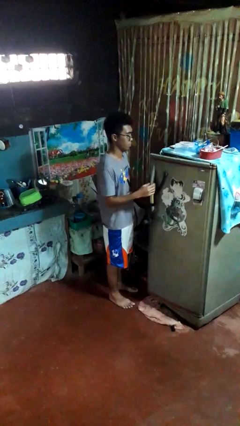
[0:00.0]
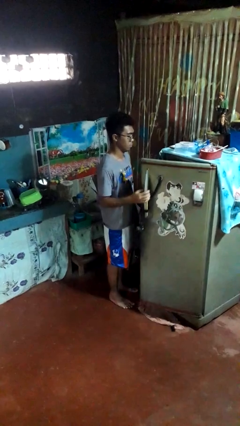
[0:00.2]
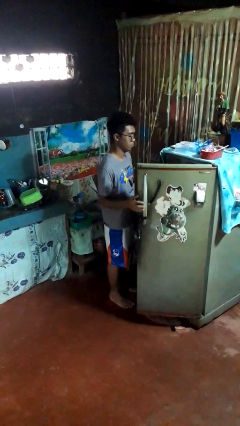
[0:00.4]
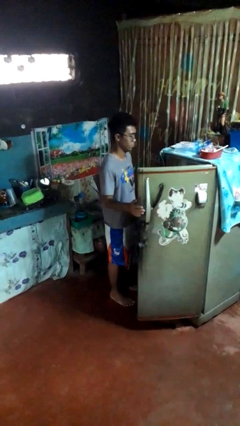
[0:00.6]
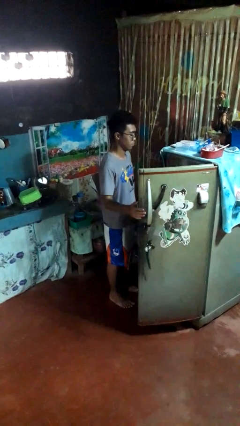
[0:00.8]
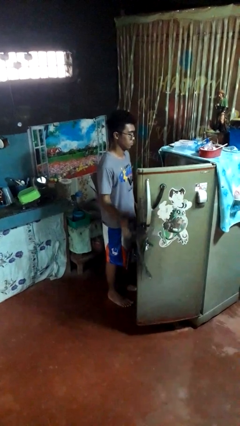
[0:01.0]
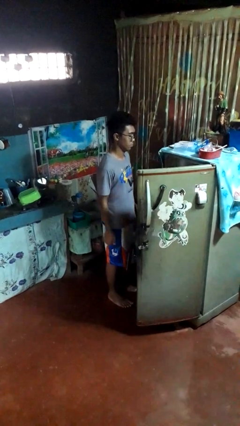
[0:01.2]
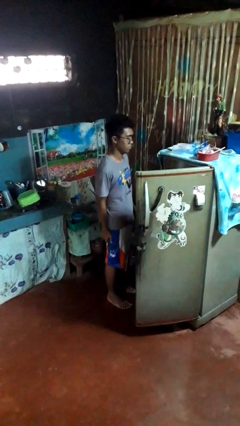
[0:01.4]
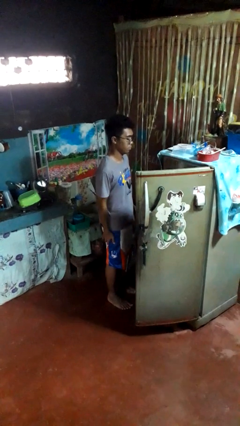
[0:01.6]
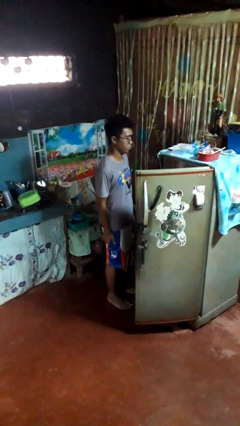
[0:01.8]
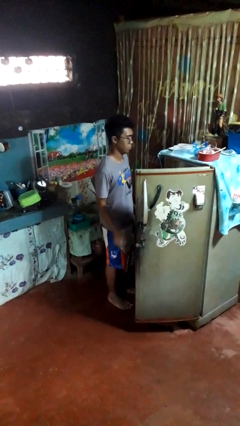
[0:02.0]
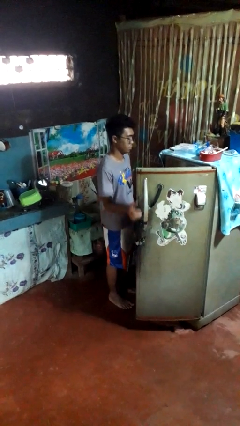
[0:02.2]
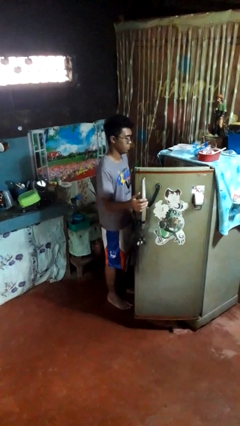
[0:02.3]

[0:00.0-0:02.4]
person opens refrigerator

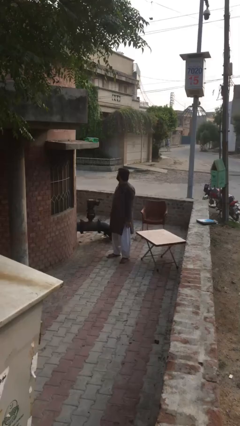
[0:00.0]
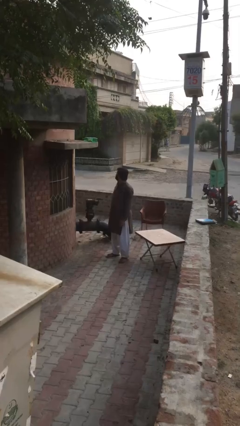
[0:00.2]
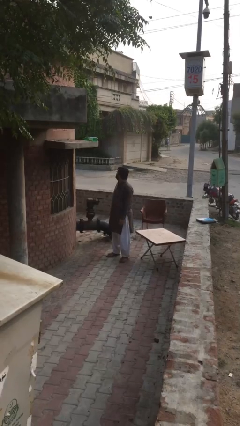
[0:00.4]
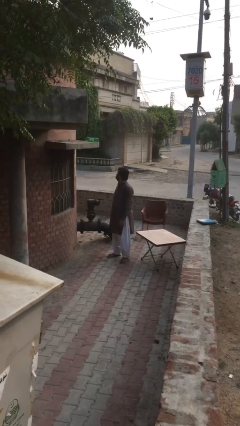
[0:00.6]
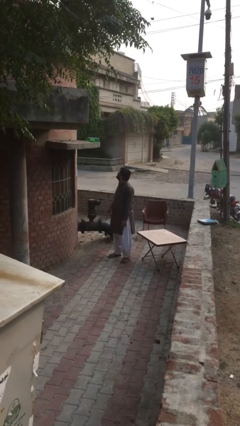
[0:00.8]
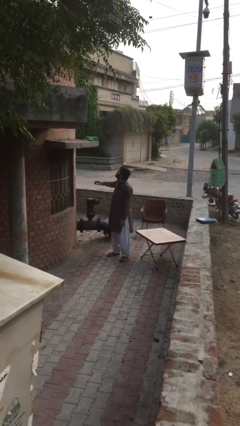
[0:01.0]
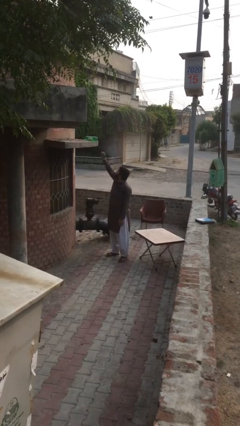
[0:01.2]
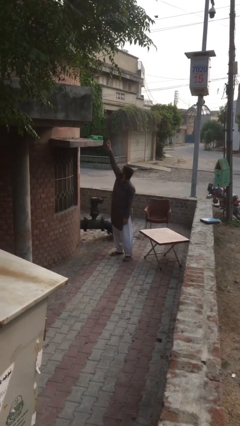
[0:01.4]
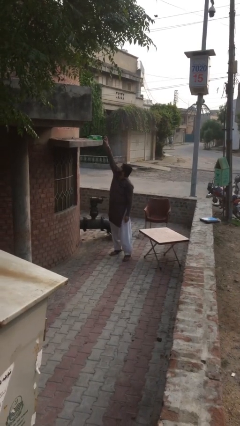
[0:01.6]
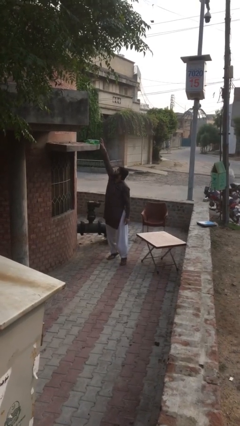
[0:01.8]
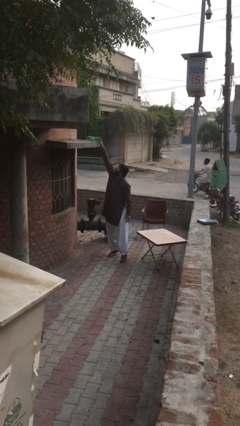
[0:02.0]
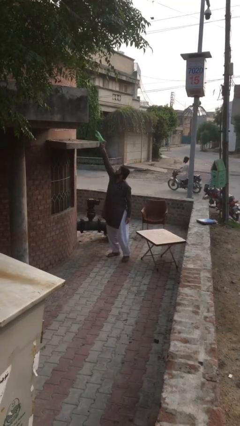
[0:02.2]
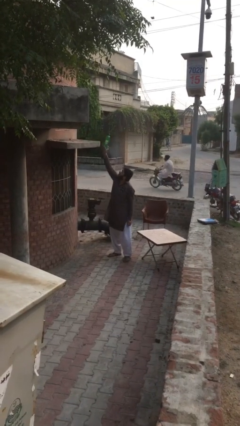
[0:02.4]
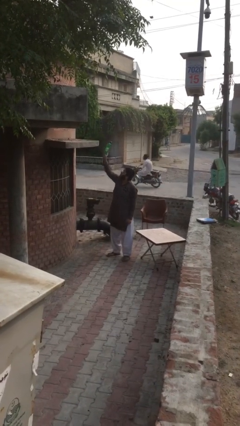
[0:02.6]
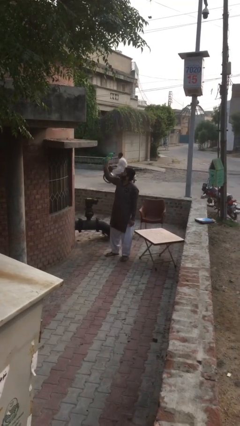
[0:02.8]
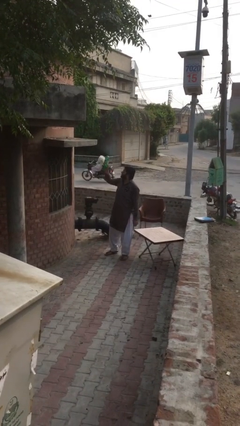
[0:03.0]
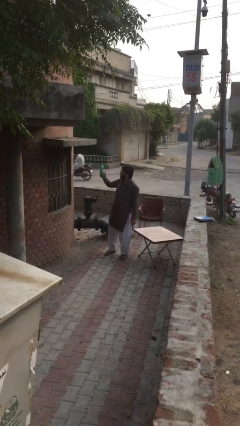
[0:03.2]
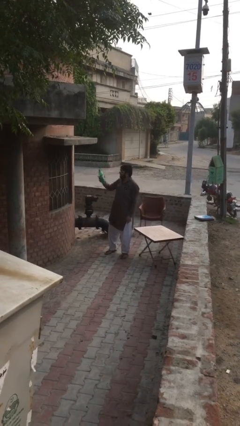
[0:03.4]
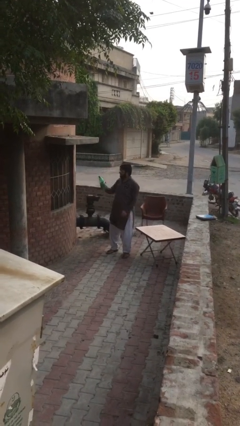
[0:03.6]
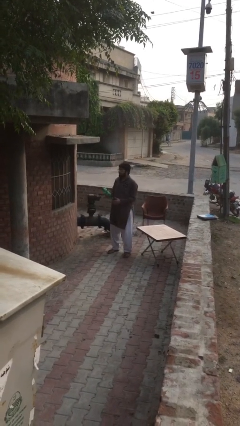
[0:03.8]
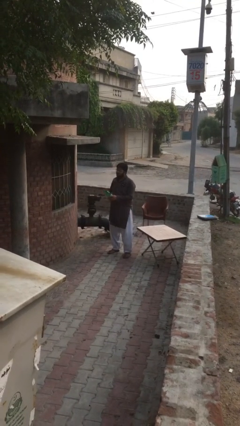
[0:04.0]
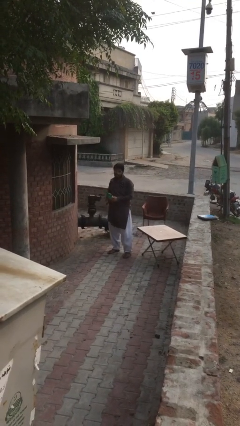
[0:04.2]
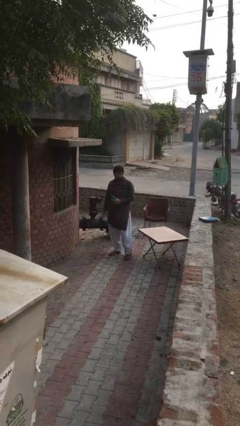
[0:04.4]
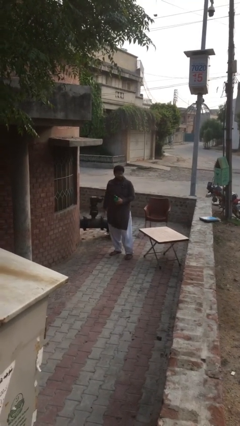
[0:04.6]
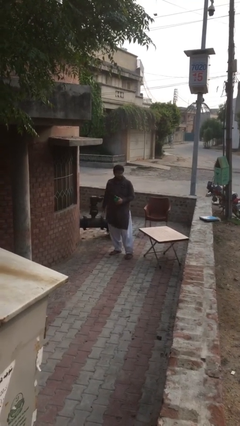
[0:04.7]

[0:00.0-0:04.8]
person picks up object from shelf

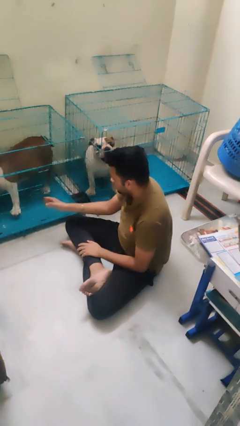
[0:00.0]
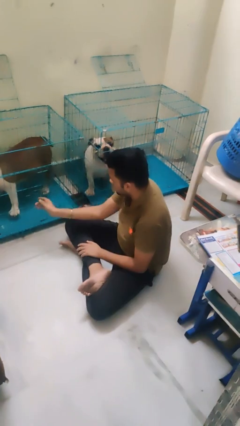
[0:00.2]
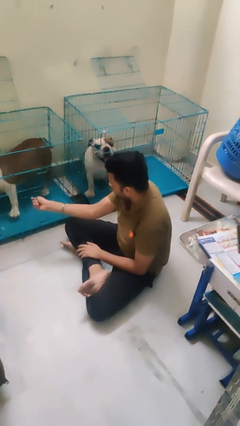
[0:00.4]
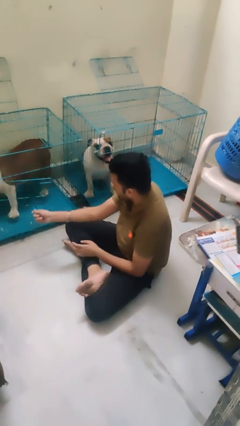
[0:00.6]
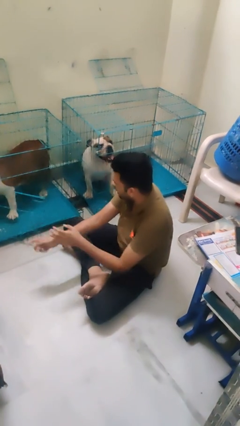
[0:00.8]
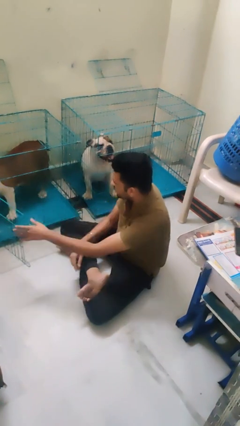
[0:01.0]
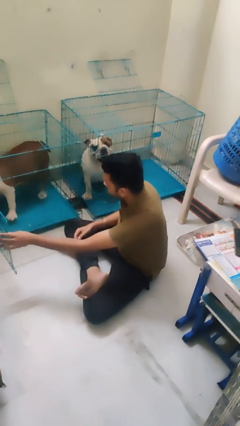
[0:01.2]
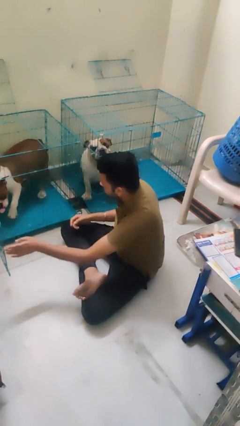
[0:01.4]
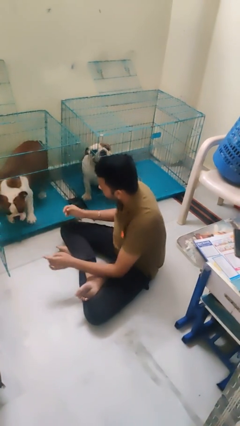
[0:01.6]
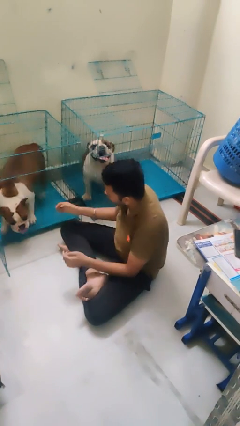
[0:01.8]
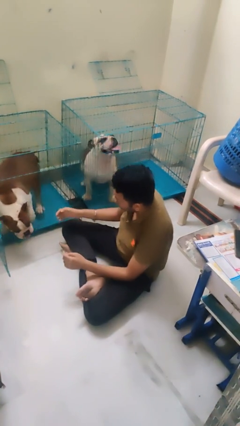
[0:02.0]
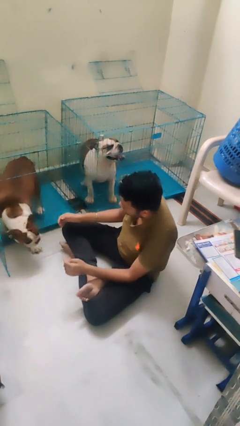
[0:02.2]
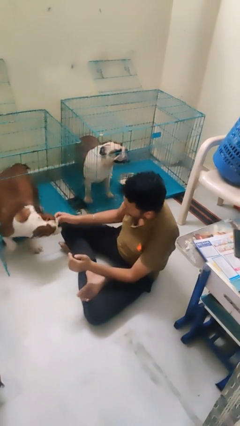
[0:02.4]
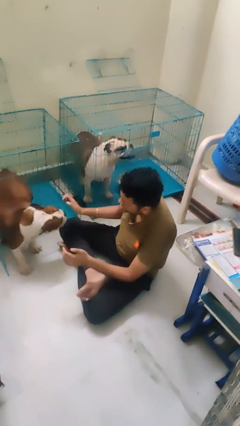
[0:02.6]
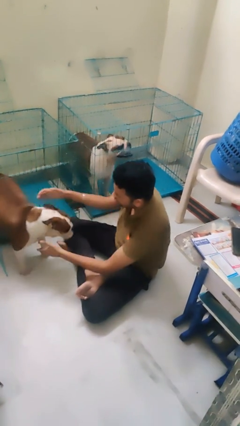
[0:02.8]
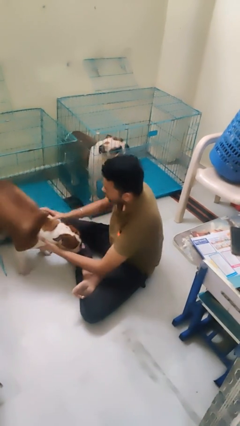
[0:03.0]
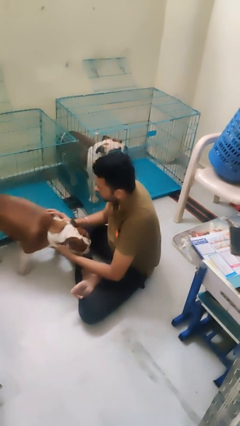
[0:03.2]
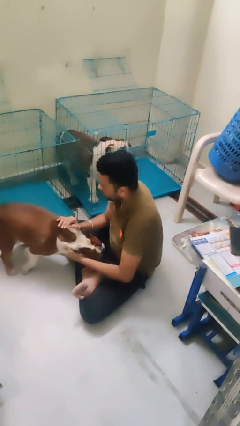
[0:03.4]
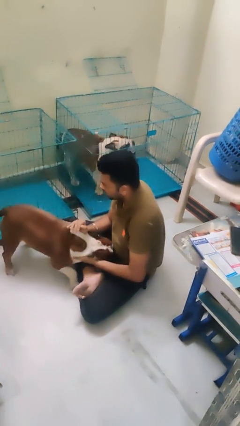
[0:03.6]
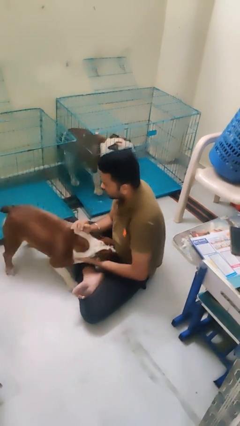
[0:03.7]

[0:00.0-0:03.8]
person uncrates dog

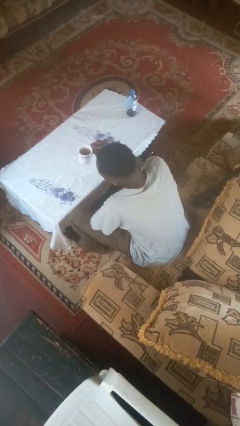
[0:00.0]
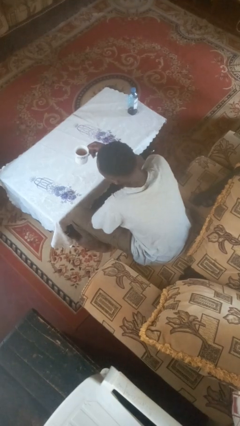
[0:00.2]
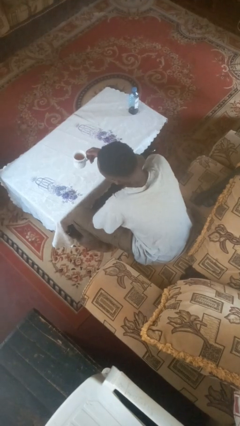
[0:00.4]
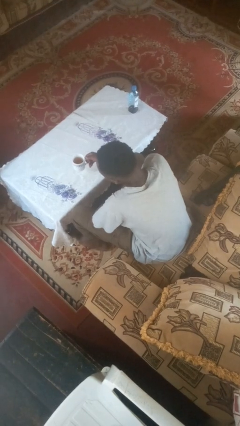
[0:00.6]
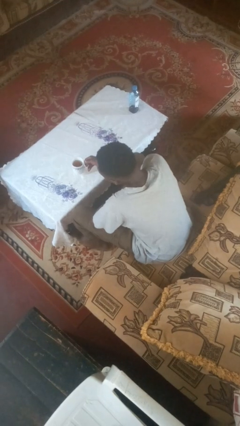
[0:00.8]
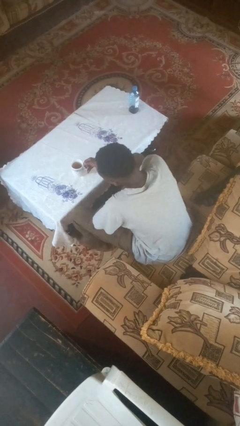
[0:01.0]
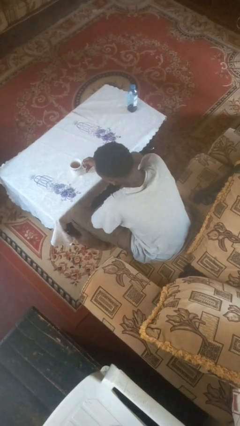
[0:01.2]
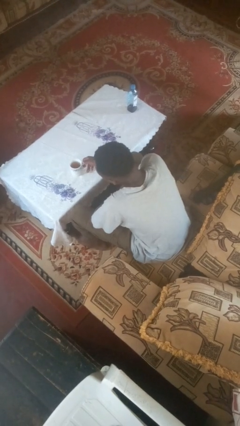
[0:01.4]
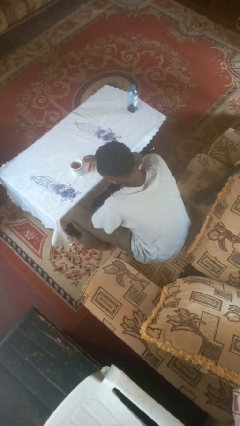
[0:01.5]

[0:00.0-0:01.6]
person puts down object on table

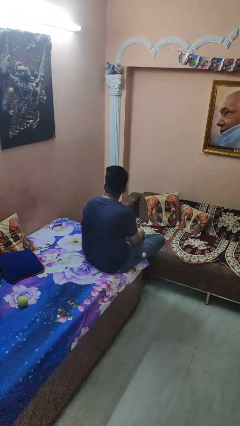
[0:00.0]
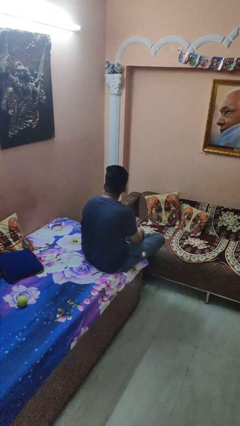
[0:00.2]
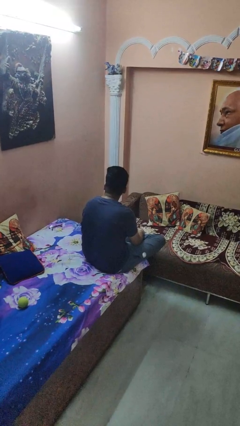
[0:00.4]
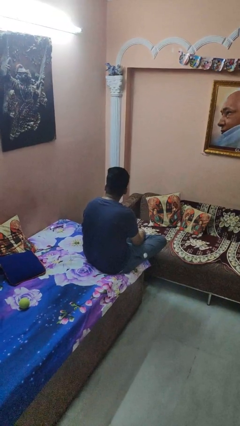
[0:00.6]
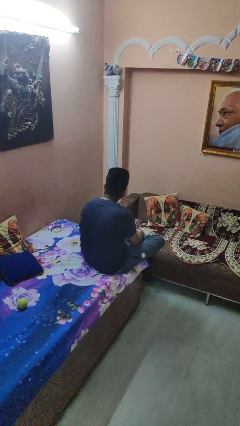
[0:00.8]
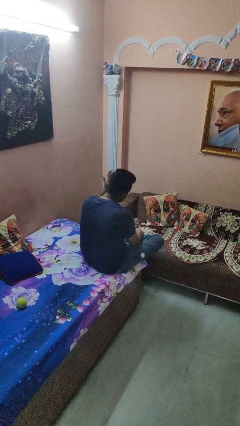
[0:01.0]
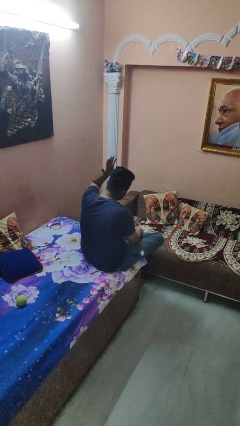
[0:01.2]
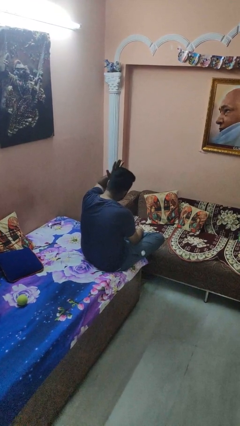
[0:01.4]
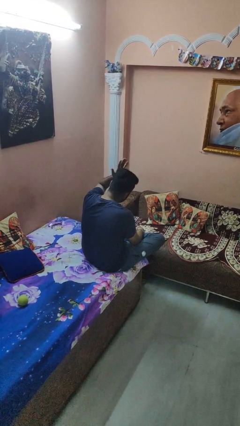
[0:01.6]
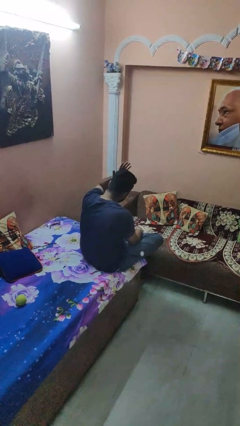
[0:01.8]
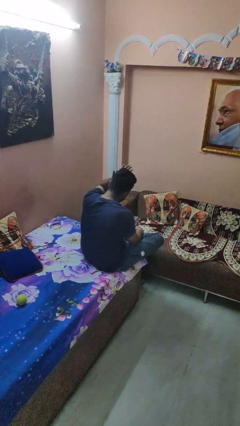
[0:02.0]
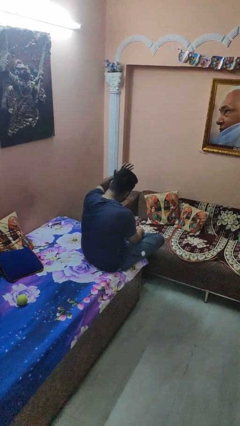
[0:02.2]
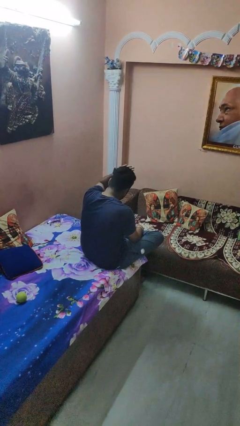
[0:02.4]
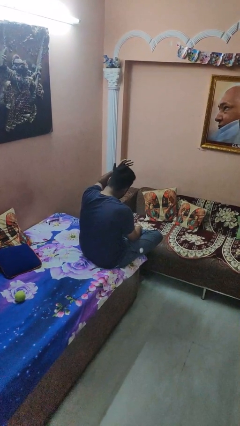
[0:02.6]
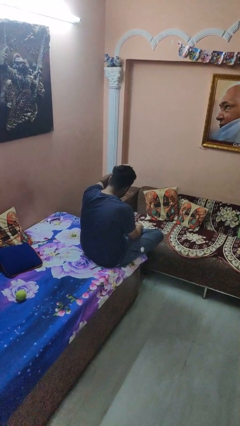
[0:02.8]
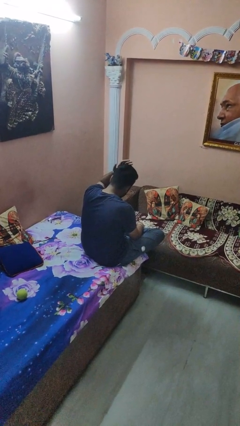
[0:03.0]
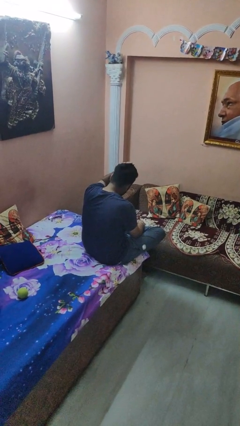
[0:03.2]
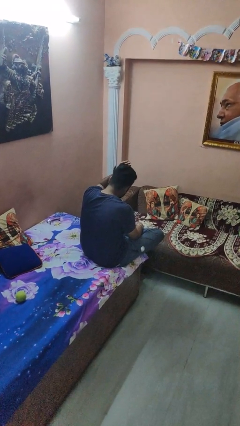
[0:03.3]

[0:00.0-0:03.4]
person pats head

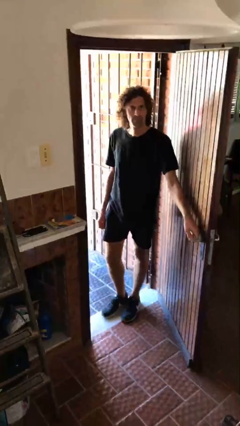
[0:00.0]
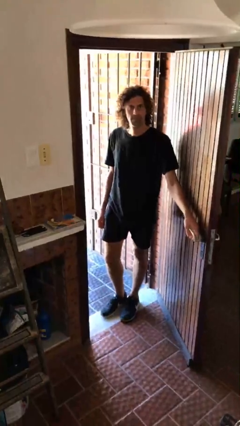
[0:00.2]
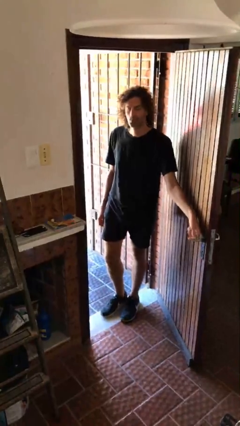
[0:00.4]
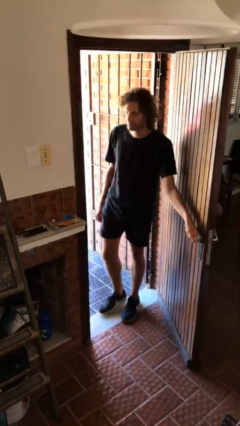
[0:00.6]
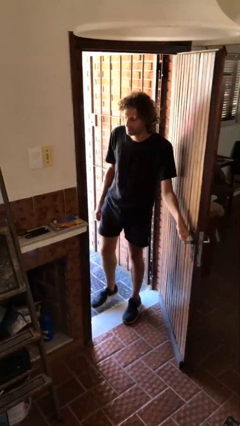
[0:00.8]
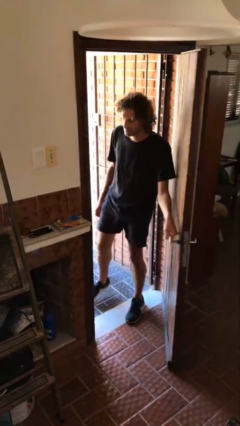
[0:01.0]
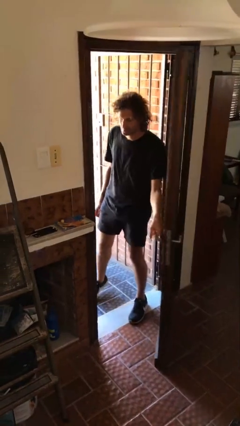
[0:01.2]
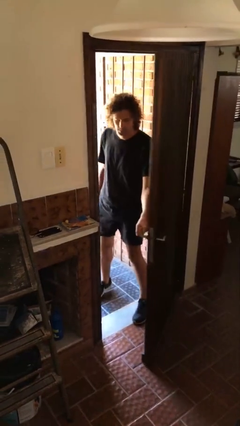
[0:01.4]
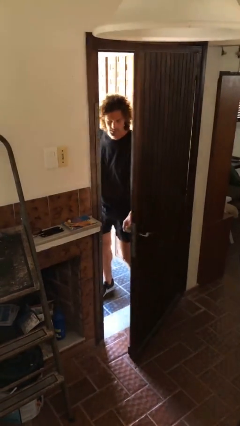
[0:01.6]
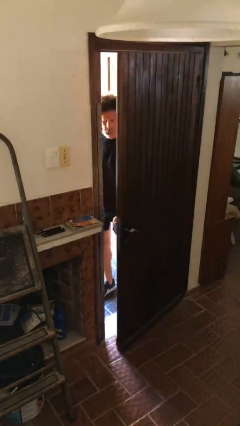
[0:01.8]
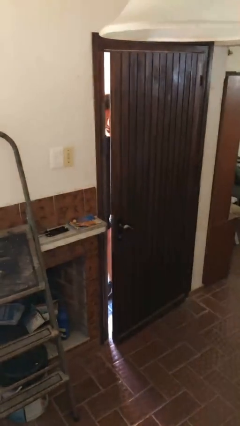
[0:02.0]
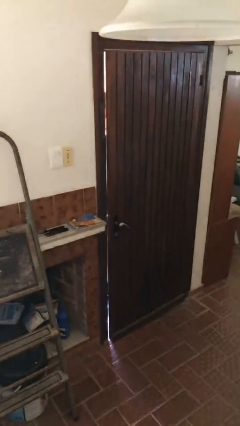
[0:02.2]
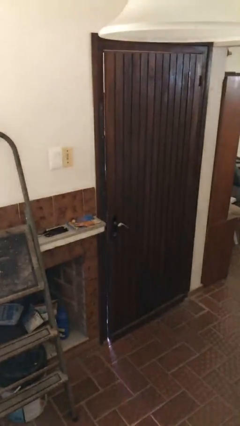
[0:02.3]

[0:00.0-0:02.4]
person closes facility door
